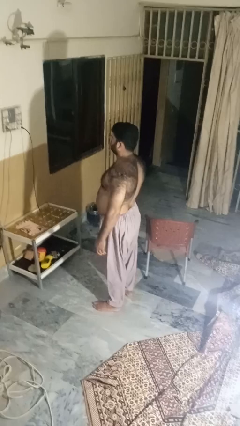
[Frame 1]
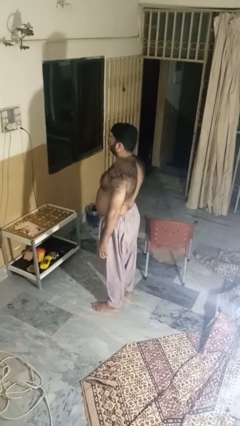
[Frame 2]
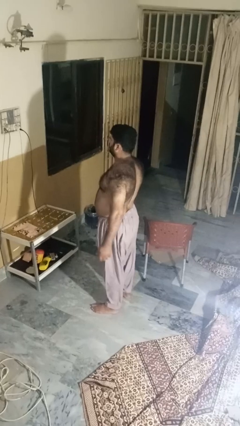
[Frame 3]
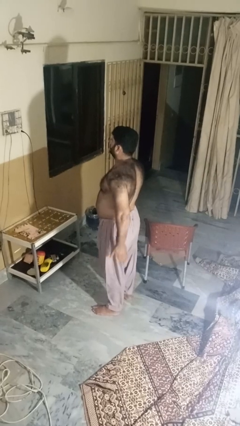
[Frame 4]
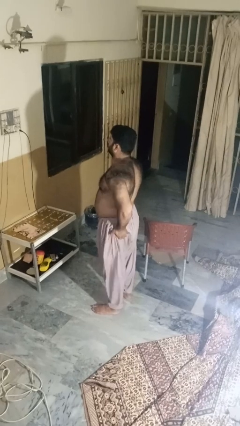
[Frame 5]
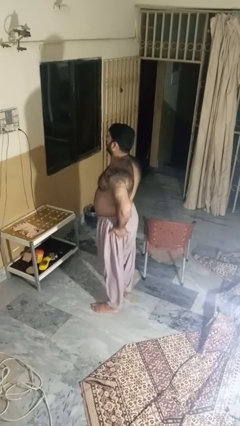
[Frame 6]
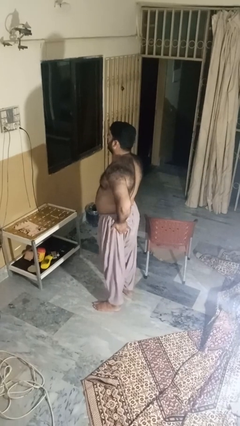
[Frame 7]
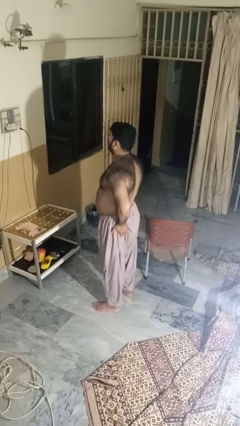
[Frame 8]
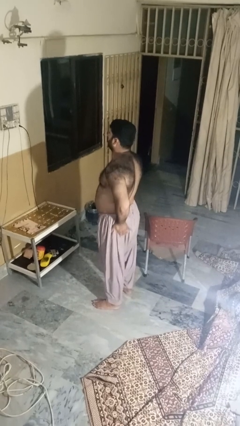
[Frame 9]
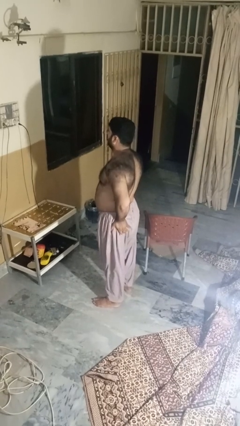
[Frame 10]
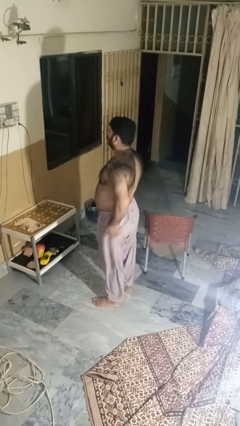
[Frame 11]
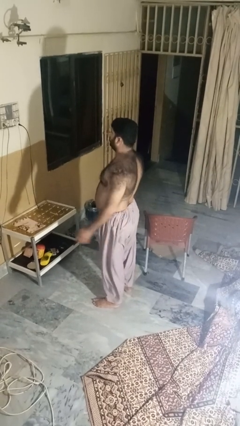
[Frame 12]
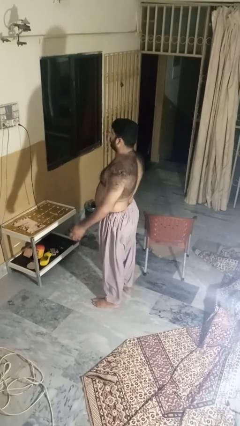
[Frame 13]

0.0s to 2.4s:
person wiggles hips

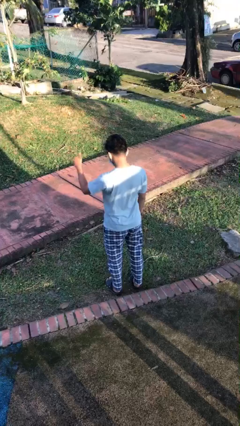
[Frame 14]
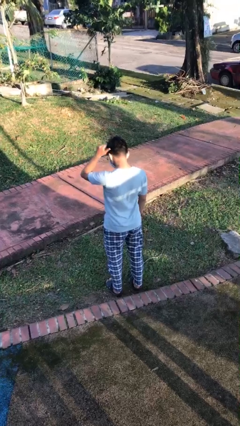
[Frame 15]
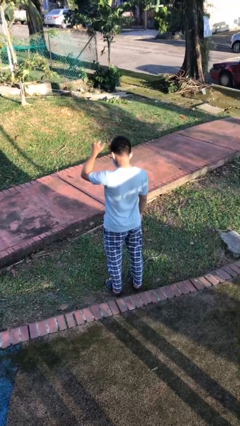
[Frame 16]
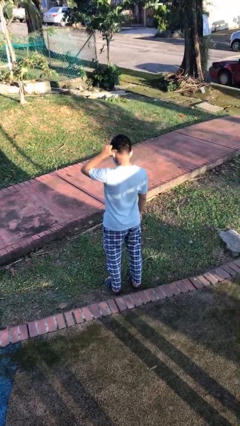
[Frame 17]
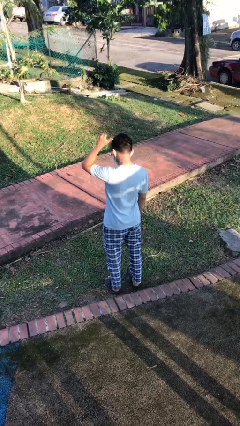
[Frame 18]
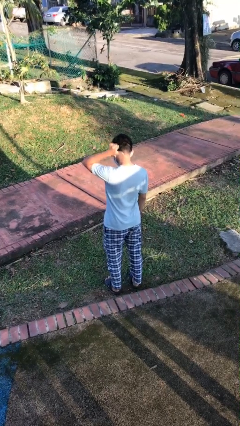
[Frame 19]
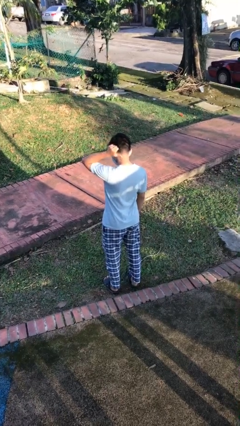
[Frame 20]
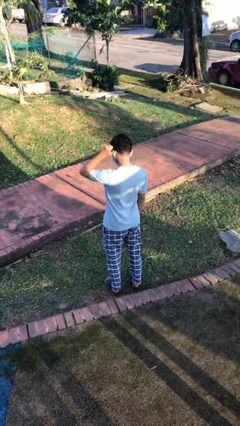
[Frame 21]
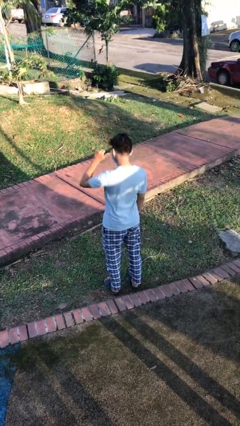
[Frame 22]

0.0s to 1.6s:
person gestures behind me

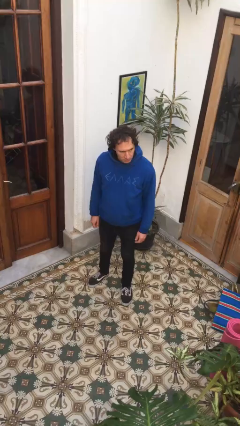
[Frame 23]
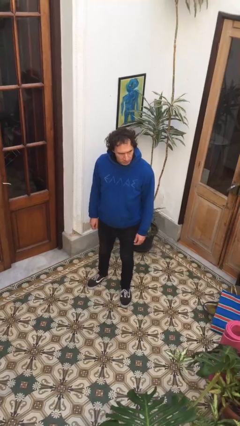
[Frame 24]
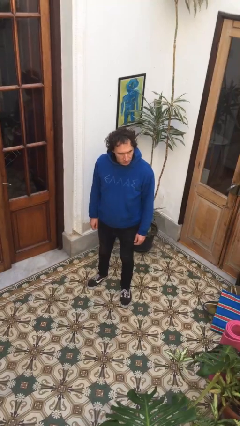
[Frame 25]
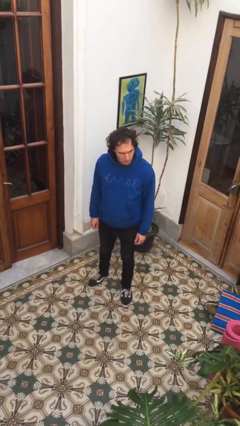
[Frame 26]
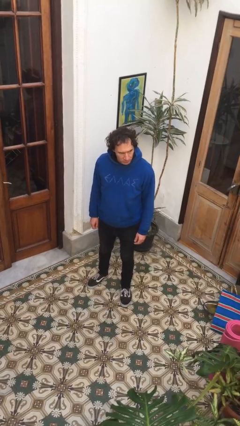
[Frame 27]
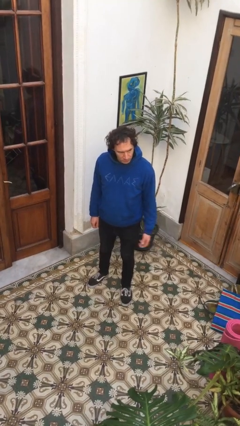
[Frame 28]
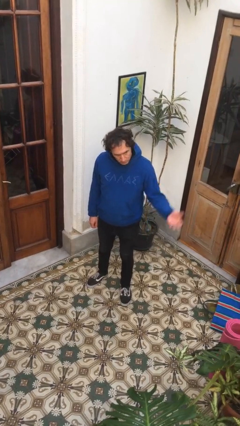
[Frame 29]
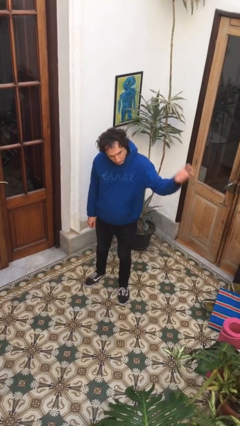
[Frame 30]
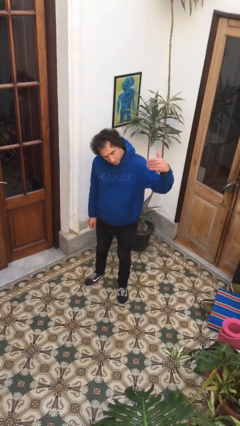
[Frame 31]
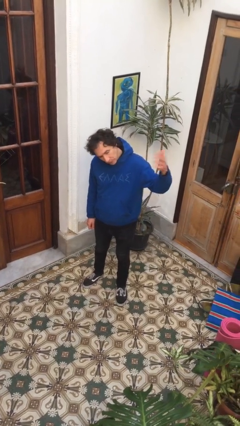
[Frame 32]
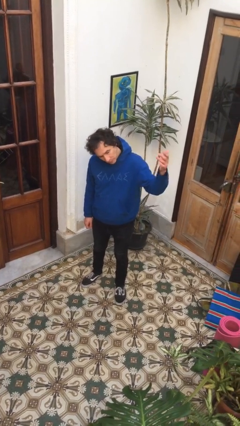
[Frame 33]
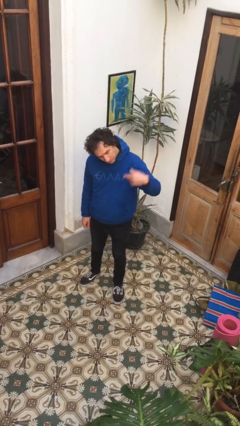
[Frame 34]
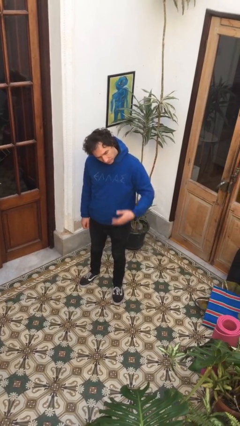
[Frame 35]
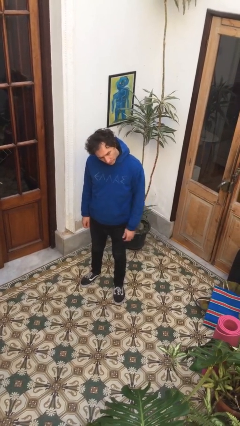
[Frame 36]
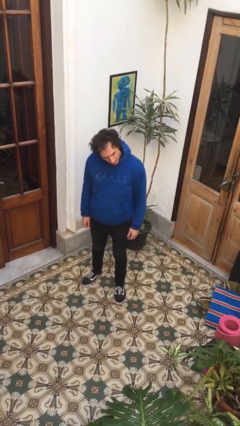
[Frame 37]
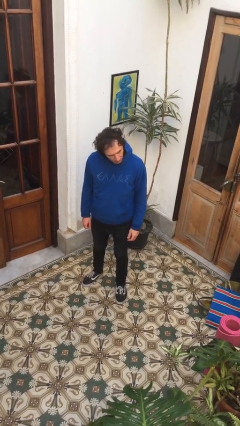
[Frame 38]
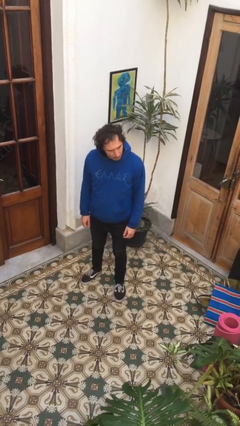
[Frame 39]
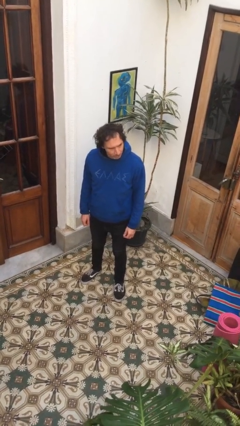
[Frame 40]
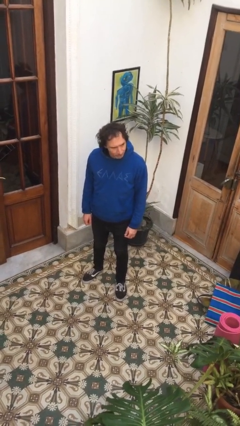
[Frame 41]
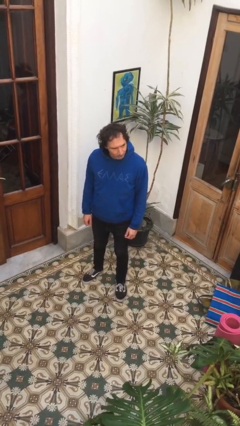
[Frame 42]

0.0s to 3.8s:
person gestures come here

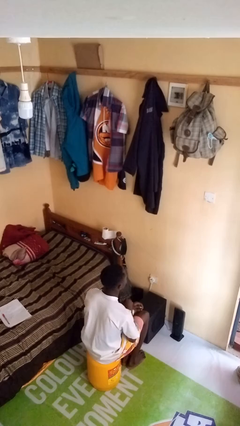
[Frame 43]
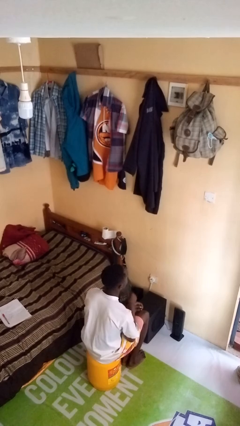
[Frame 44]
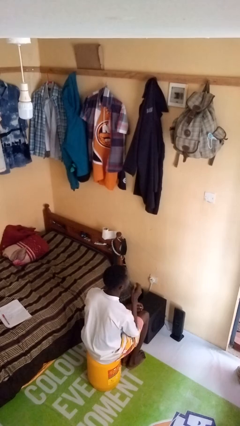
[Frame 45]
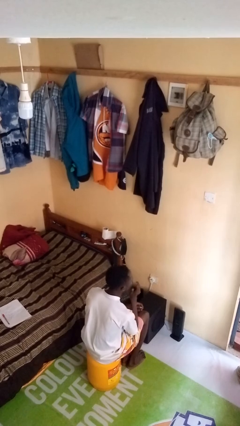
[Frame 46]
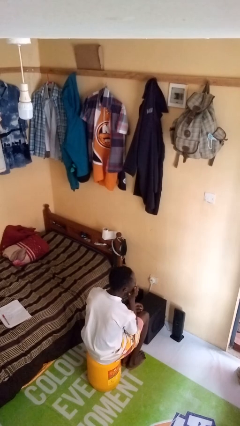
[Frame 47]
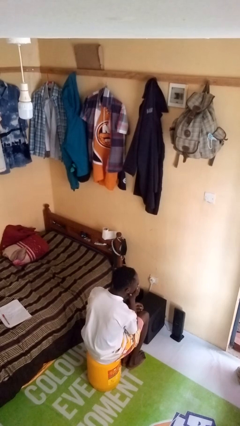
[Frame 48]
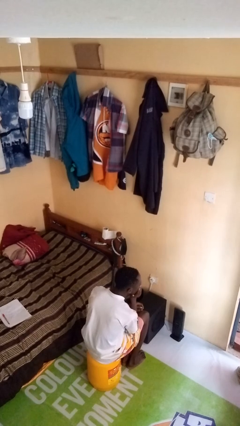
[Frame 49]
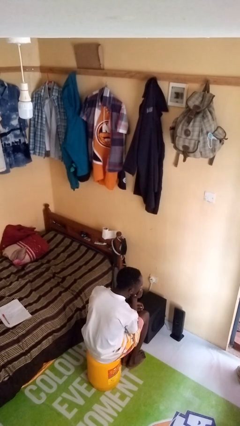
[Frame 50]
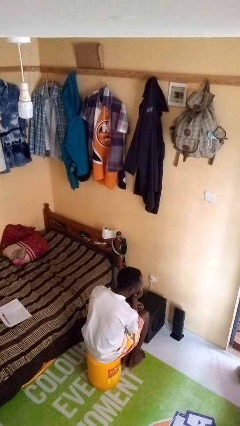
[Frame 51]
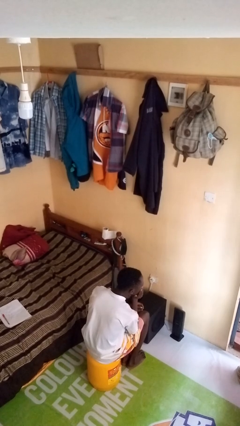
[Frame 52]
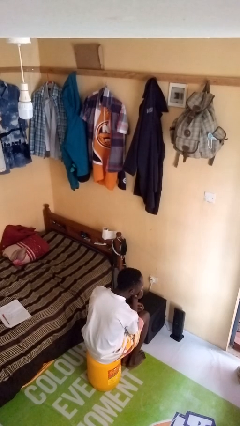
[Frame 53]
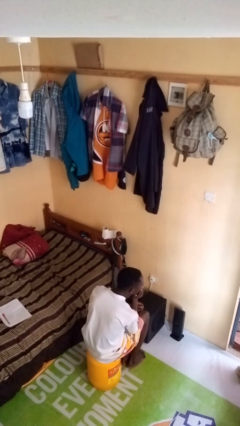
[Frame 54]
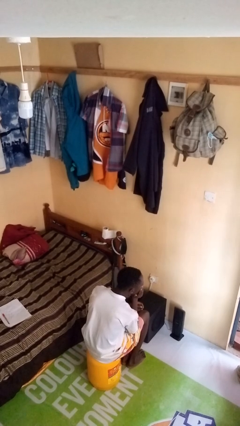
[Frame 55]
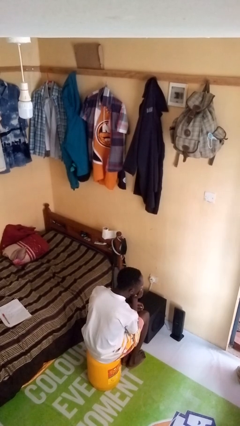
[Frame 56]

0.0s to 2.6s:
person strokes chin

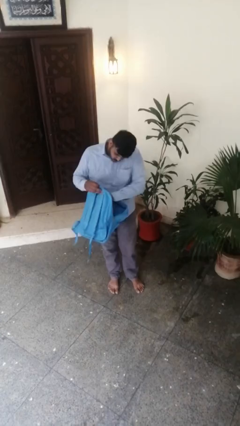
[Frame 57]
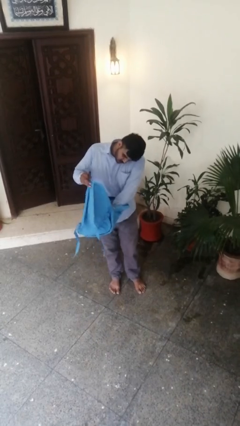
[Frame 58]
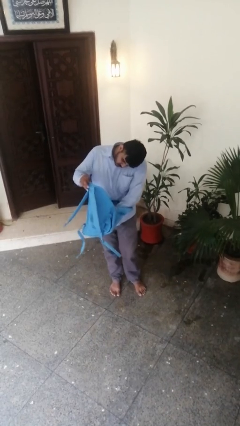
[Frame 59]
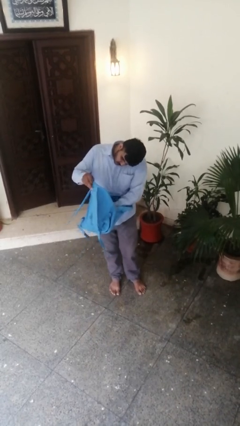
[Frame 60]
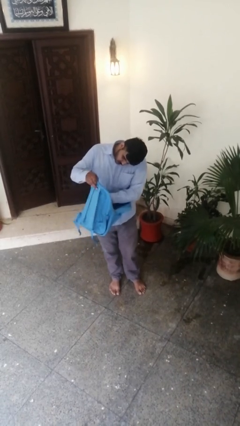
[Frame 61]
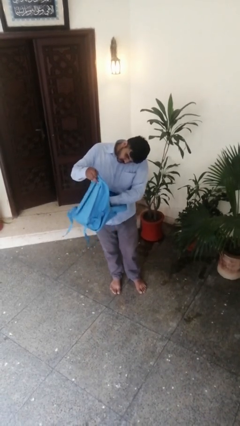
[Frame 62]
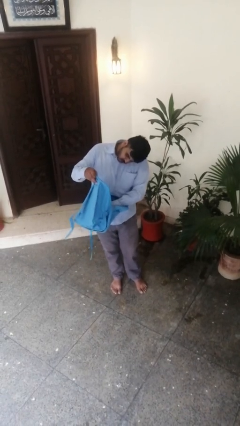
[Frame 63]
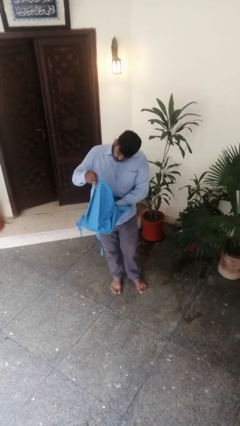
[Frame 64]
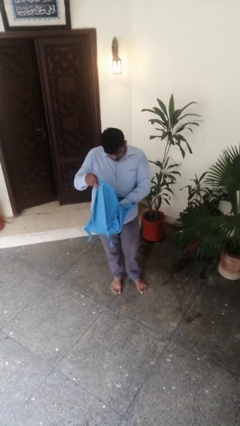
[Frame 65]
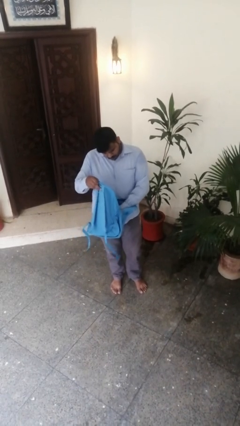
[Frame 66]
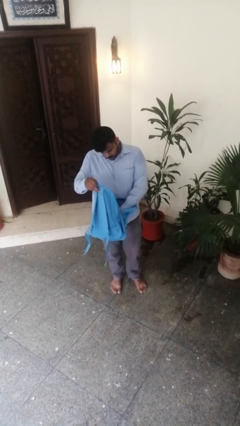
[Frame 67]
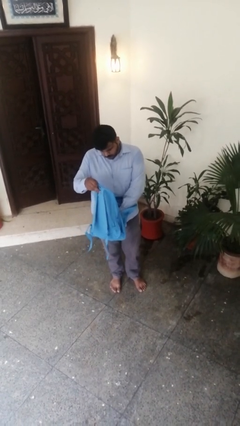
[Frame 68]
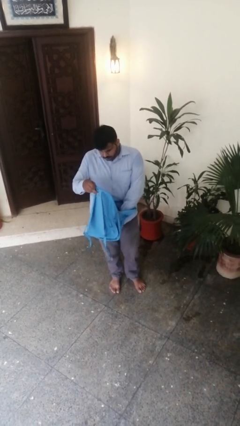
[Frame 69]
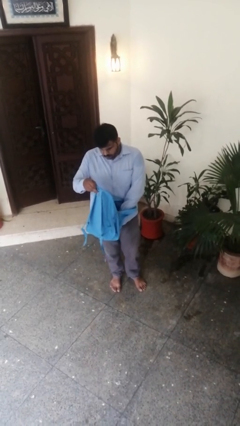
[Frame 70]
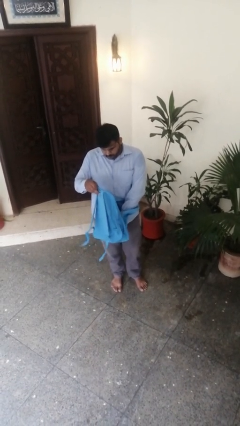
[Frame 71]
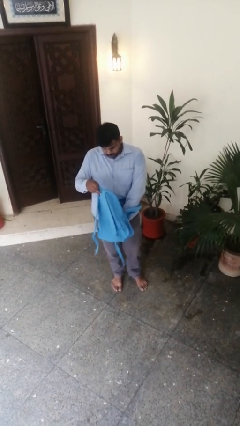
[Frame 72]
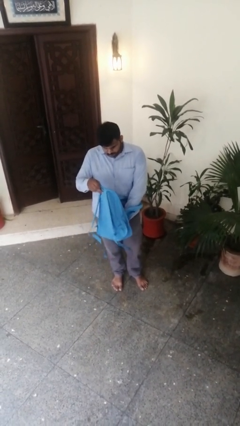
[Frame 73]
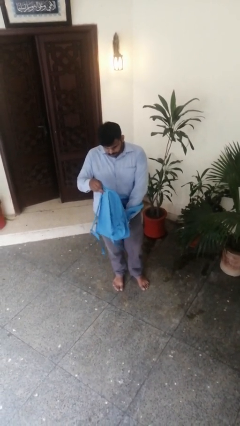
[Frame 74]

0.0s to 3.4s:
person searches in backpack

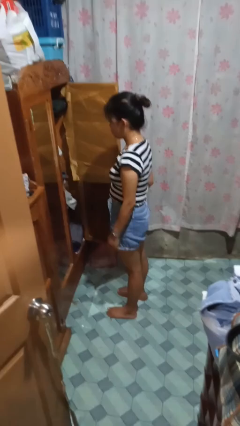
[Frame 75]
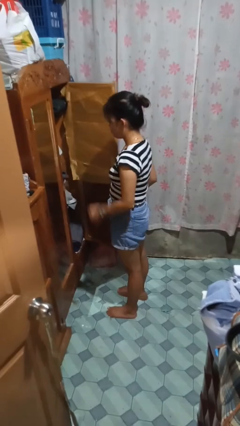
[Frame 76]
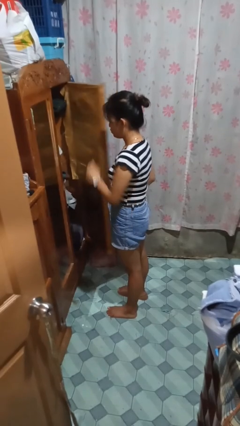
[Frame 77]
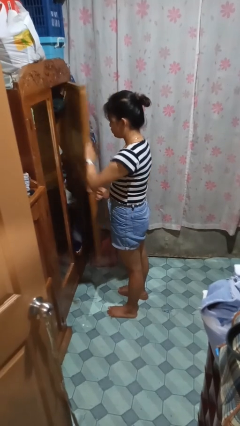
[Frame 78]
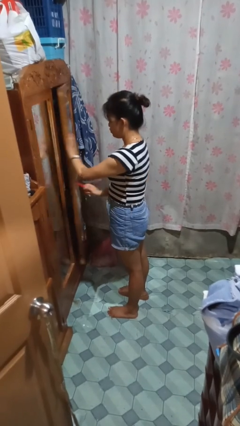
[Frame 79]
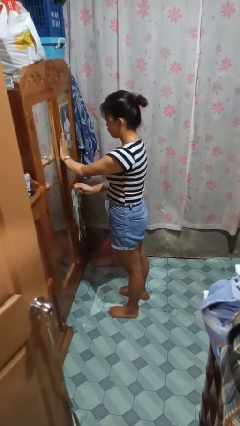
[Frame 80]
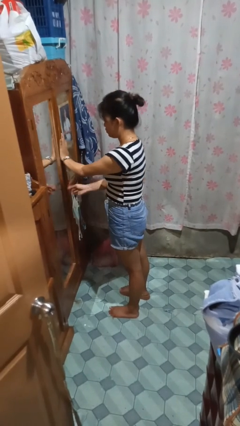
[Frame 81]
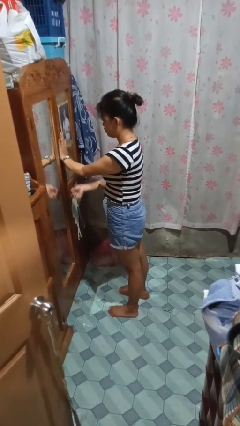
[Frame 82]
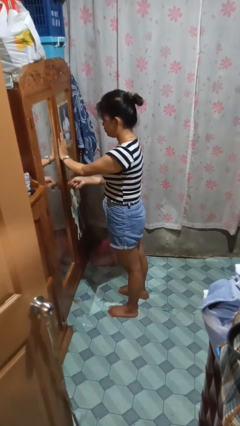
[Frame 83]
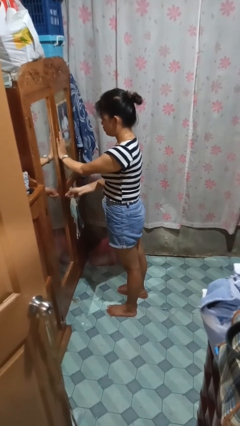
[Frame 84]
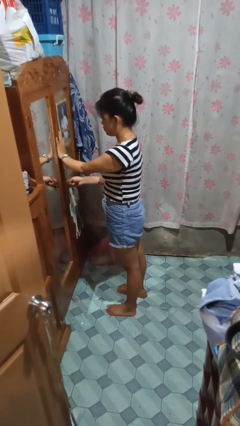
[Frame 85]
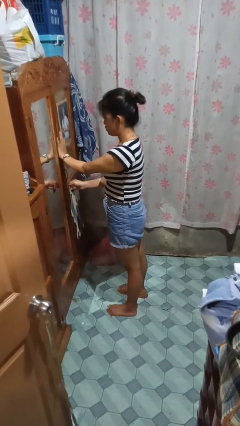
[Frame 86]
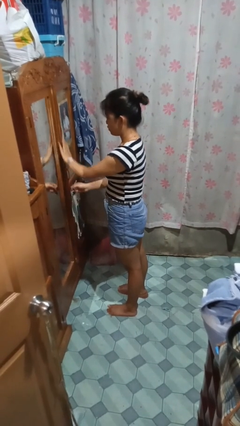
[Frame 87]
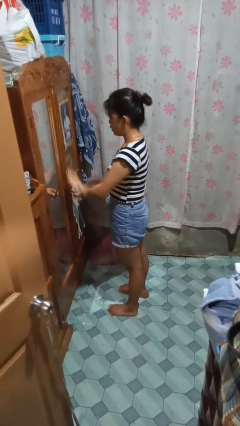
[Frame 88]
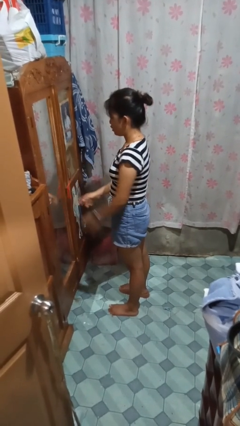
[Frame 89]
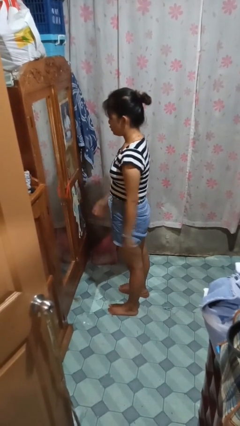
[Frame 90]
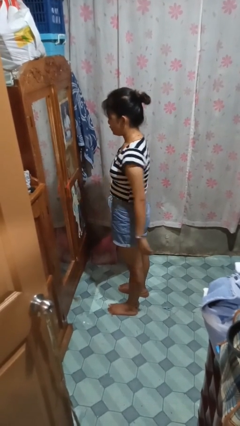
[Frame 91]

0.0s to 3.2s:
person closes closet door

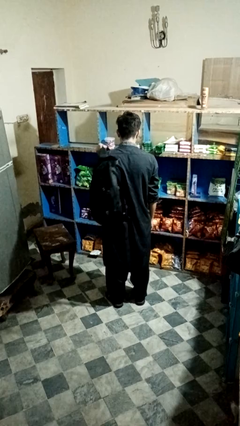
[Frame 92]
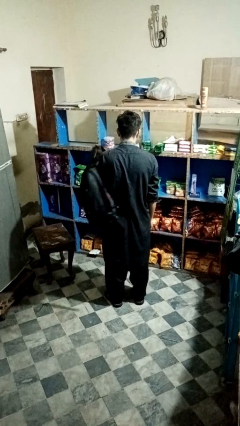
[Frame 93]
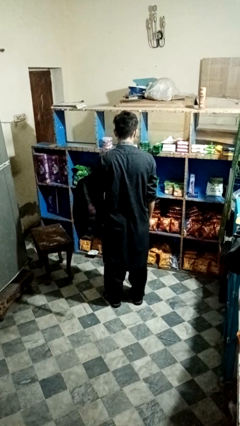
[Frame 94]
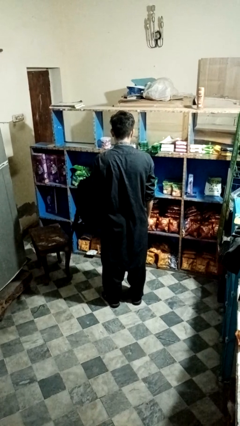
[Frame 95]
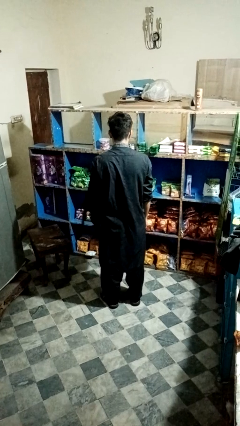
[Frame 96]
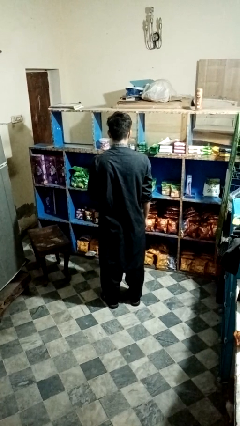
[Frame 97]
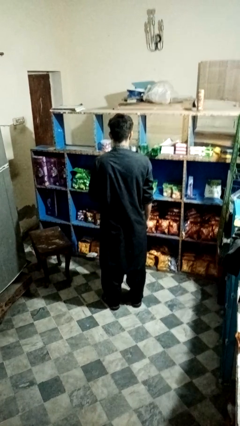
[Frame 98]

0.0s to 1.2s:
person takes off backpack
